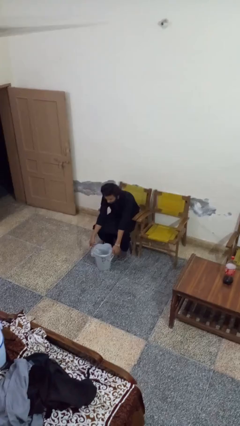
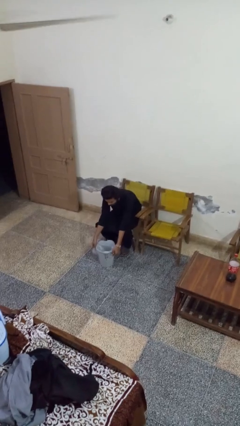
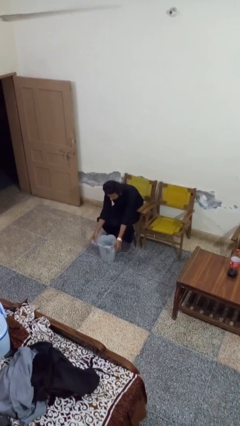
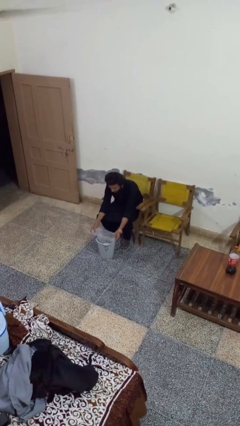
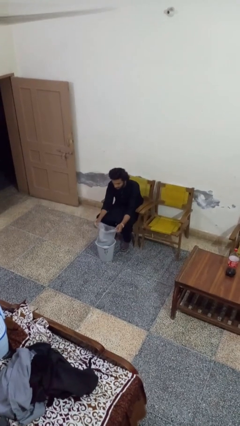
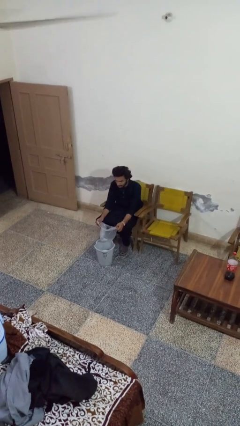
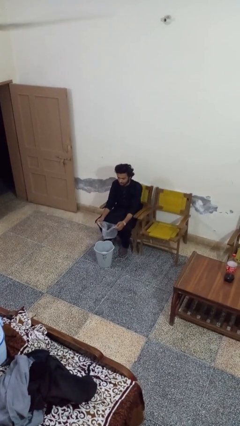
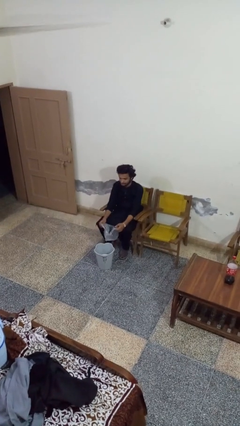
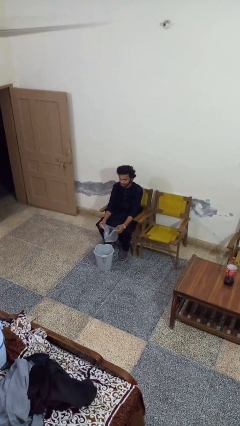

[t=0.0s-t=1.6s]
person removes trashbag from trashcan

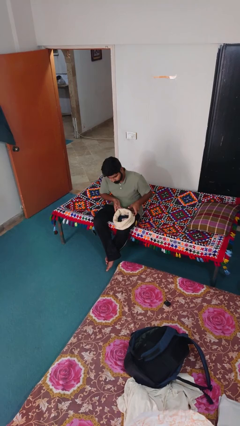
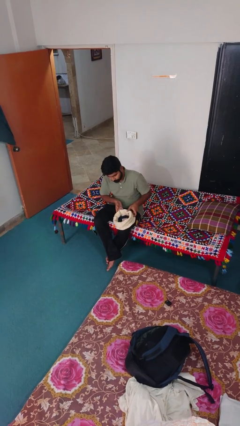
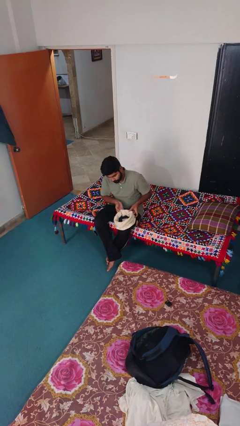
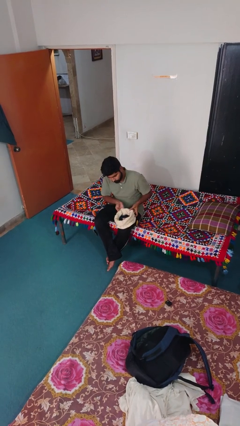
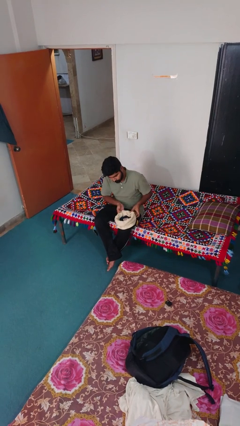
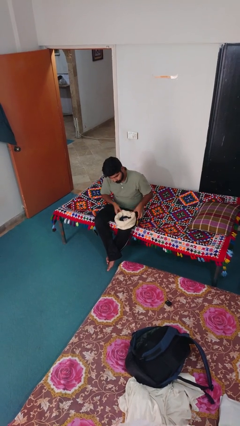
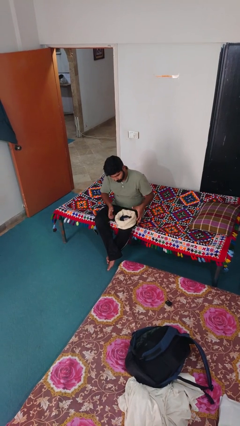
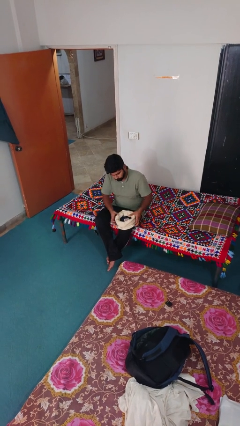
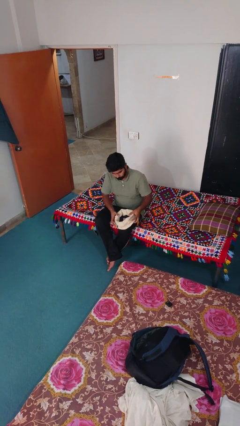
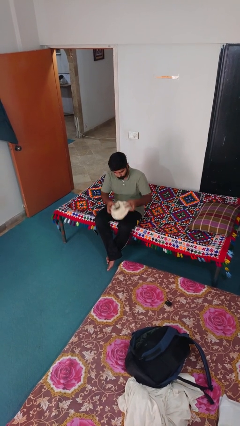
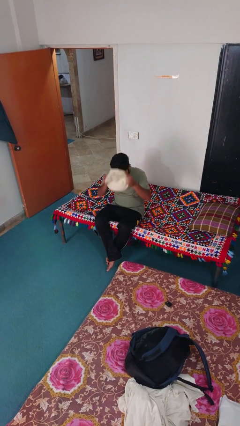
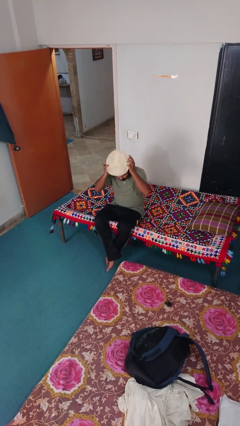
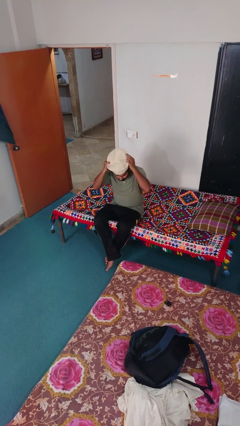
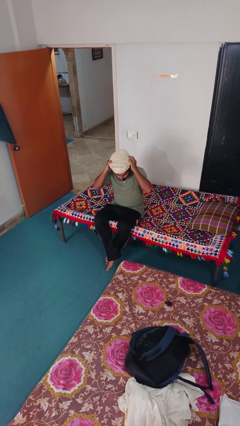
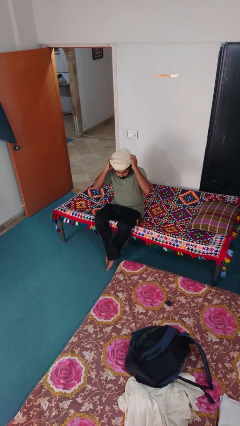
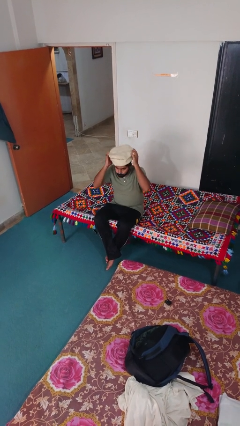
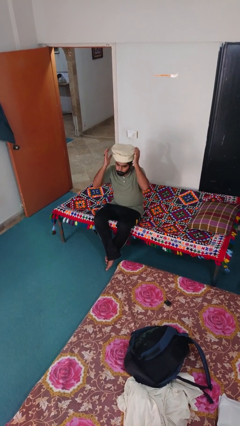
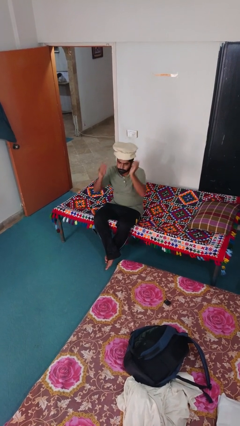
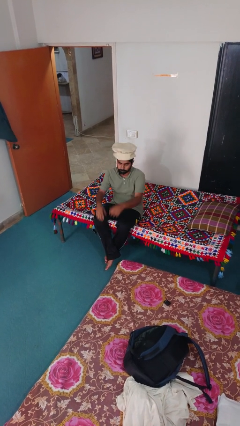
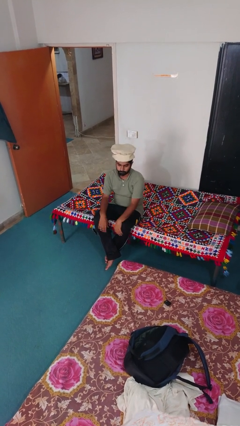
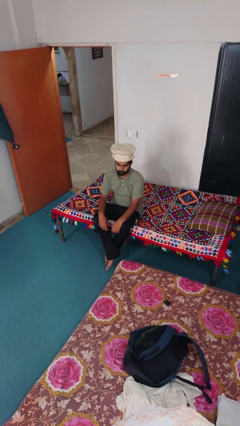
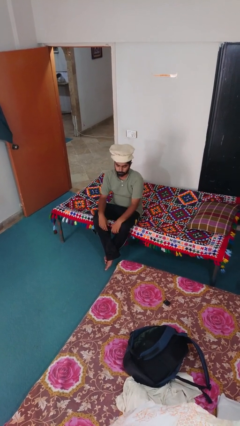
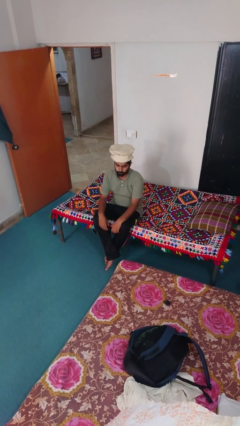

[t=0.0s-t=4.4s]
person puts on hat

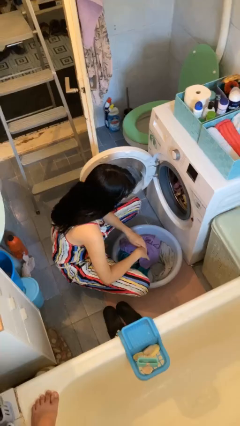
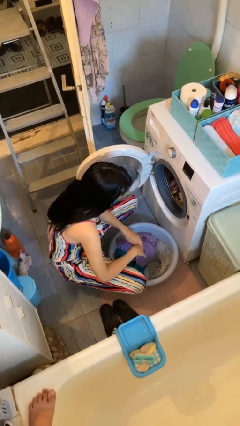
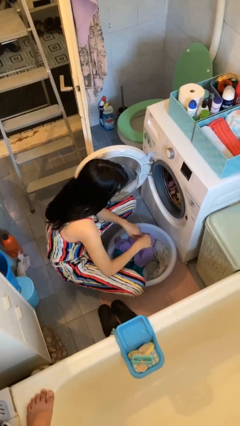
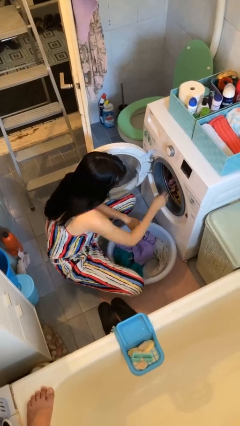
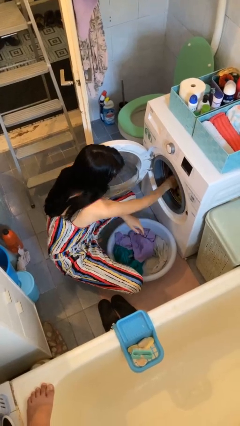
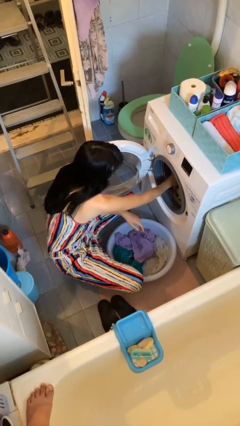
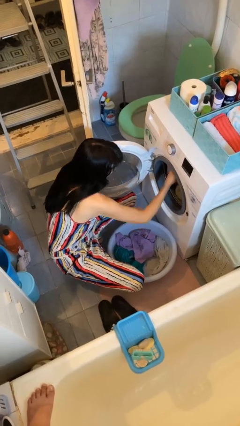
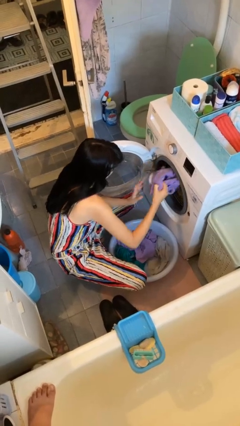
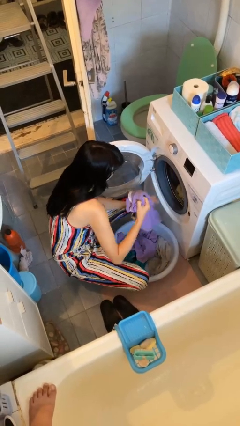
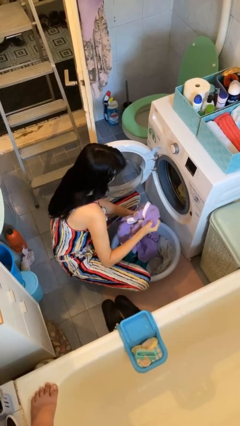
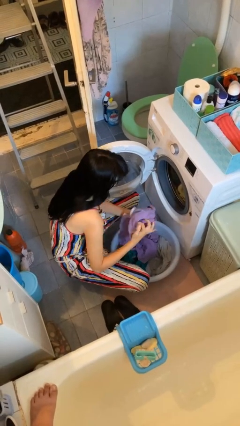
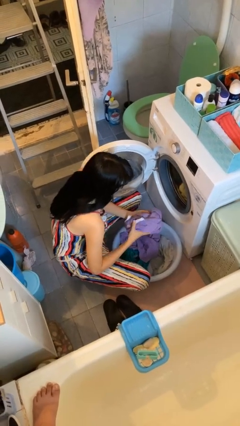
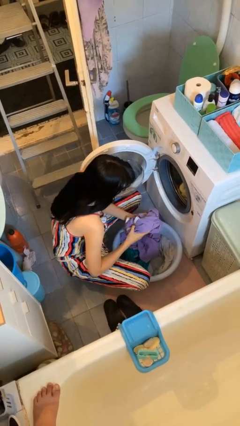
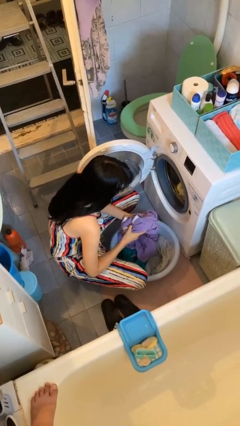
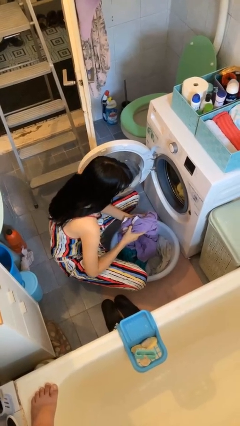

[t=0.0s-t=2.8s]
person loads clotheswasher

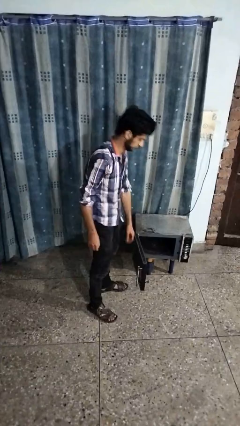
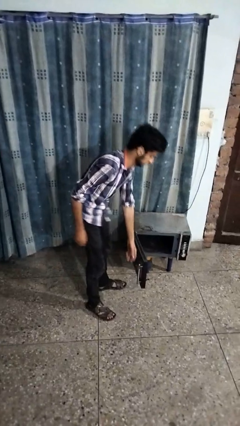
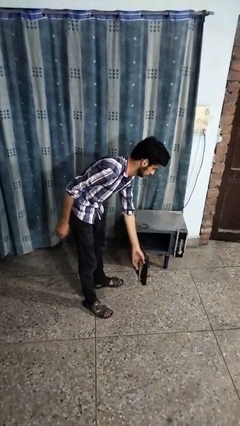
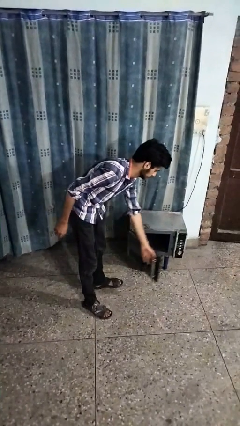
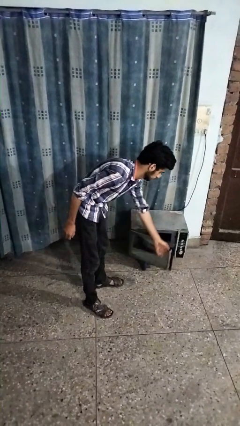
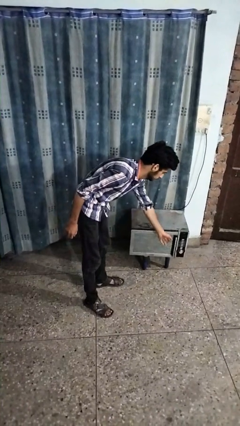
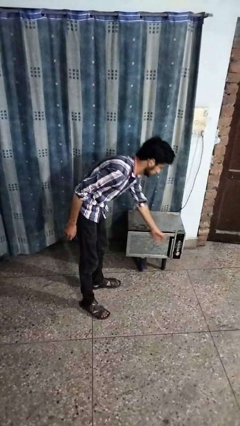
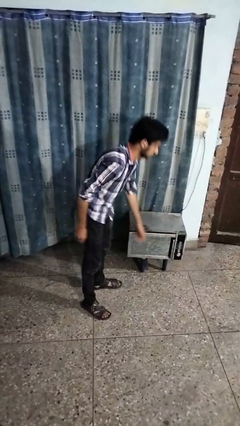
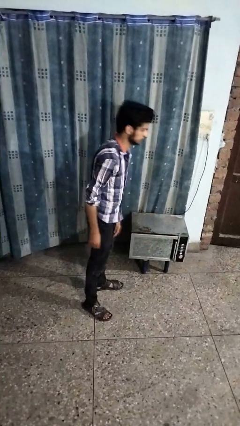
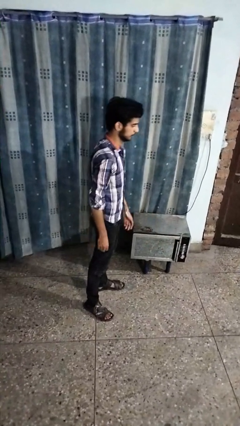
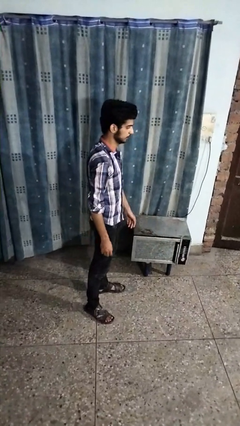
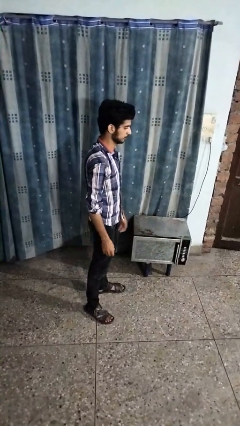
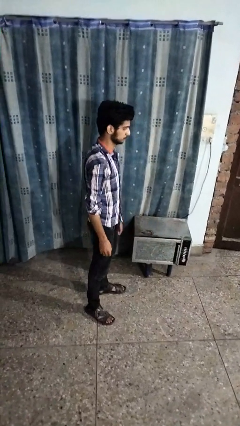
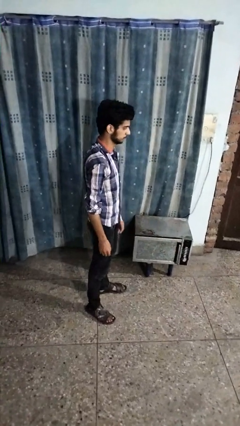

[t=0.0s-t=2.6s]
person closes oven door

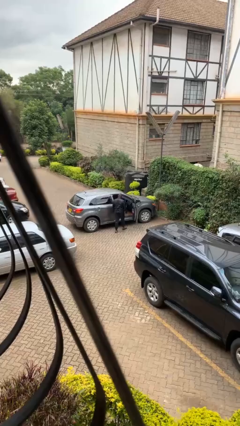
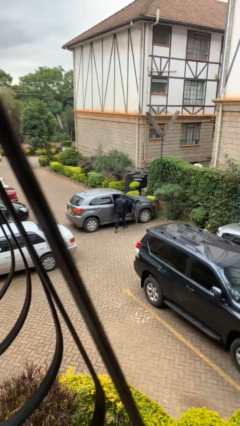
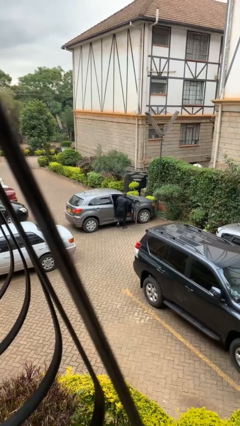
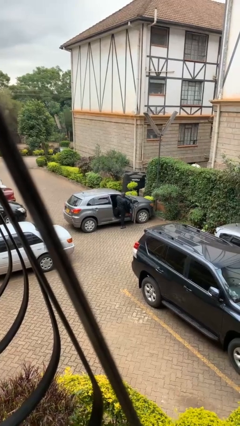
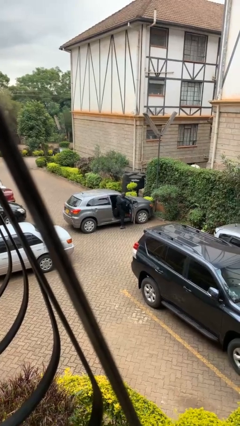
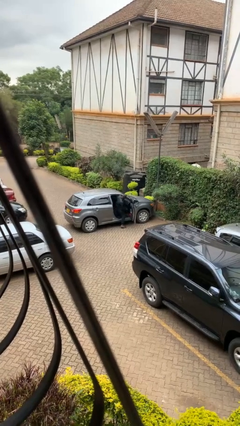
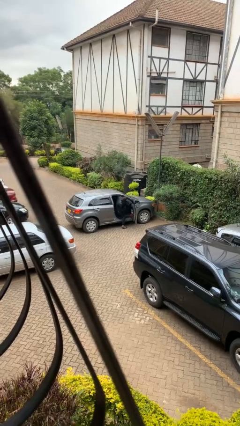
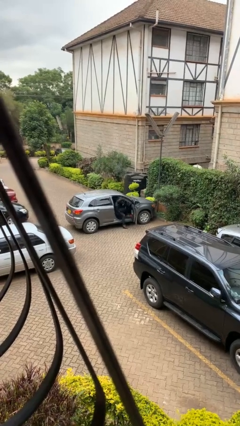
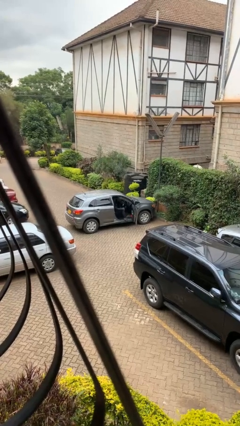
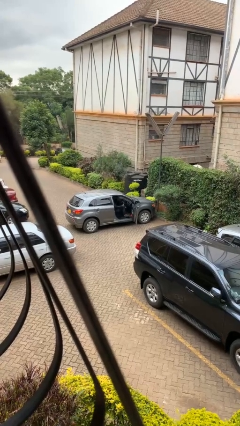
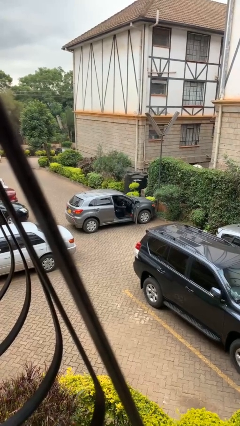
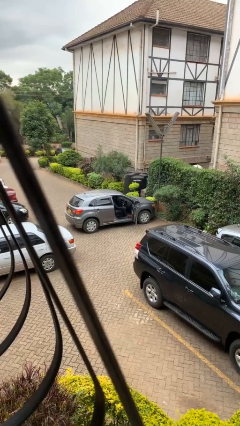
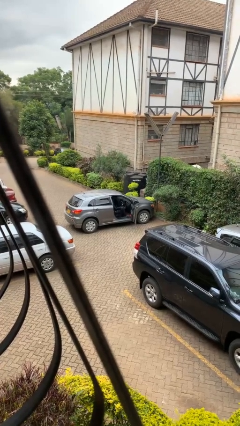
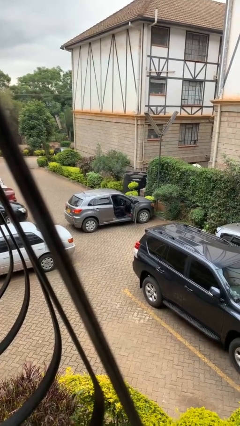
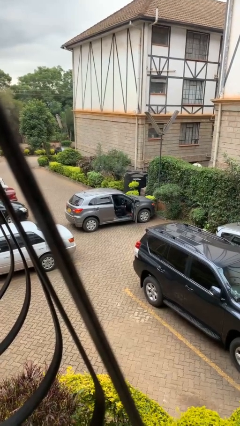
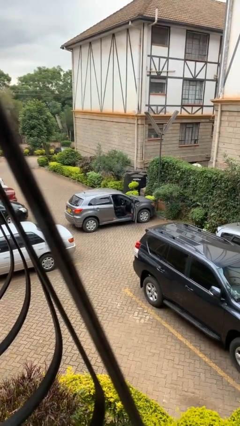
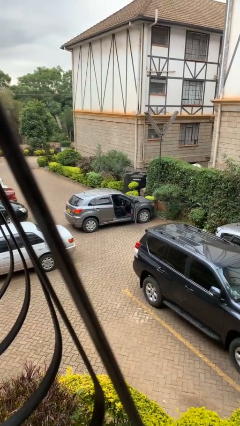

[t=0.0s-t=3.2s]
person enters car

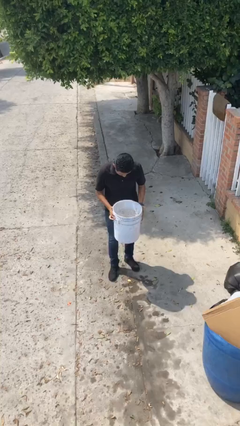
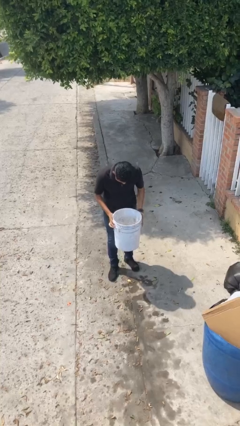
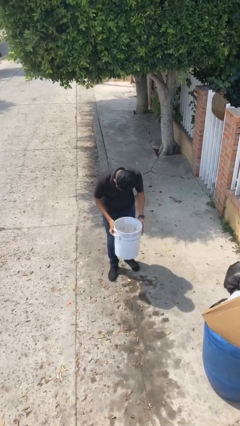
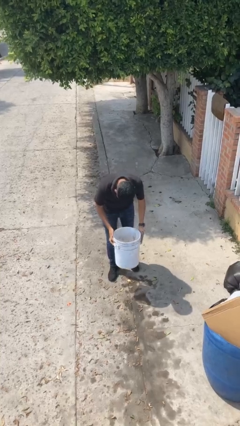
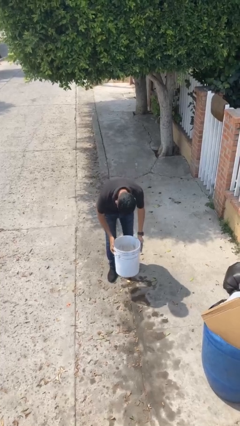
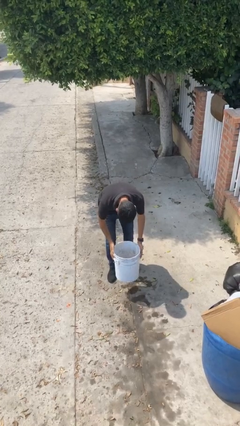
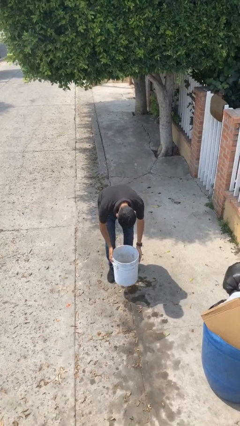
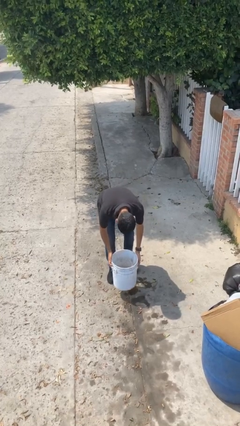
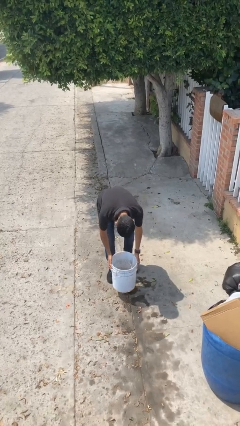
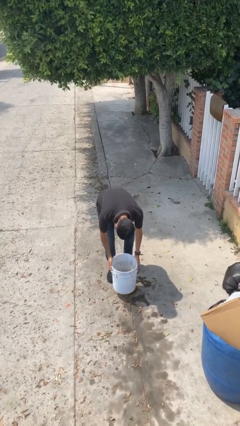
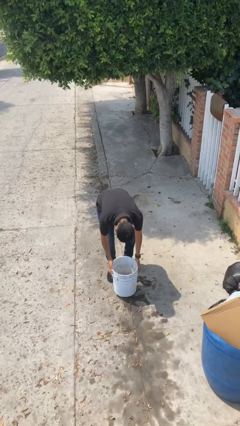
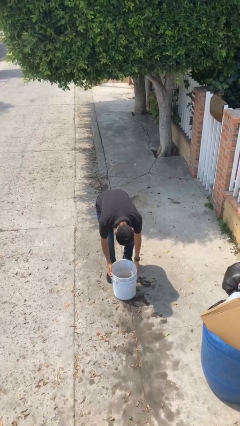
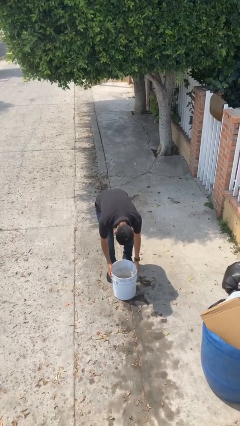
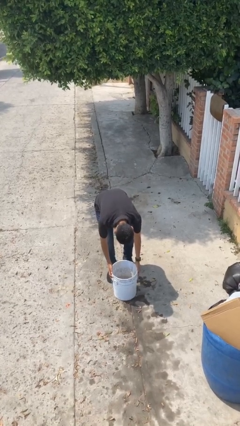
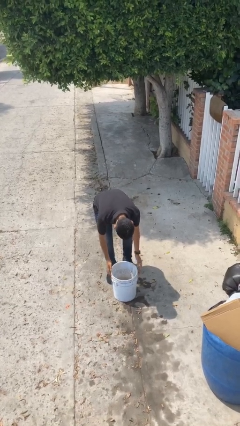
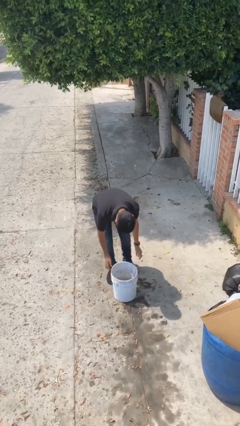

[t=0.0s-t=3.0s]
person puts down object on floor
